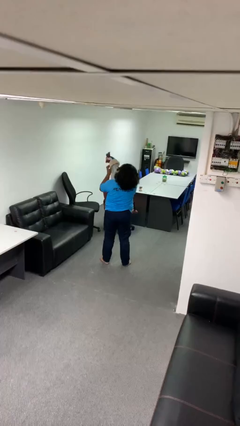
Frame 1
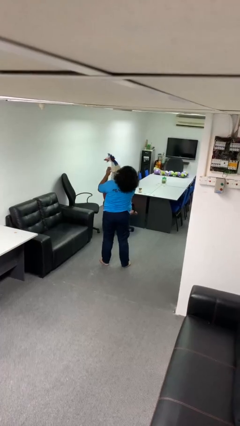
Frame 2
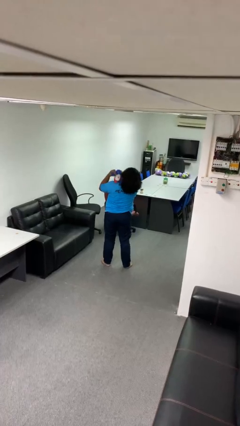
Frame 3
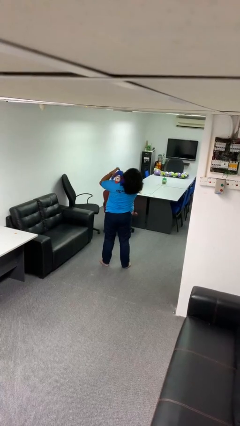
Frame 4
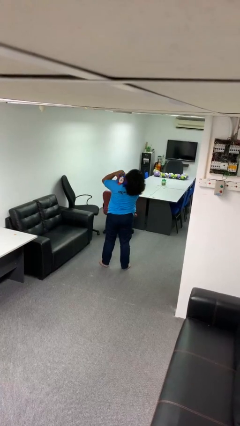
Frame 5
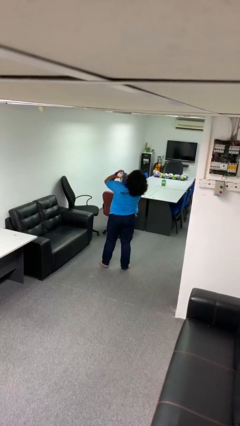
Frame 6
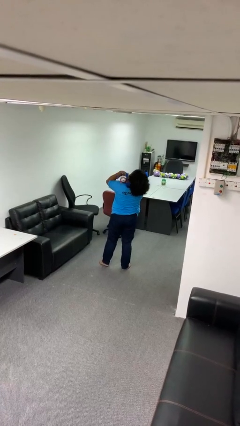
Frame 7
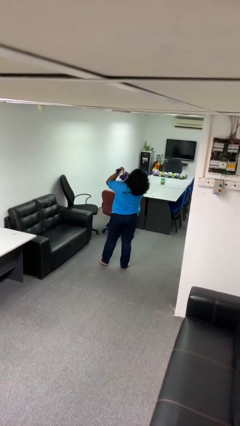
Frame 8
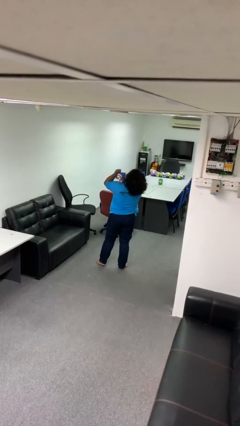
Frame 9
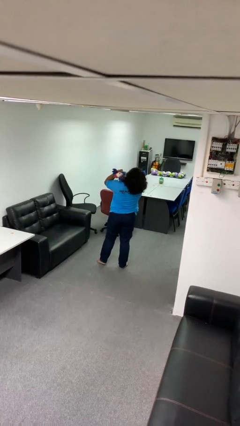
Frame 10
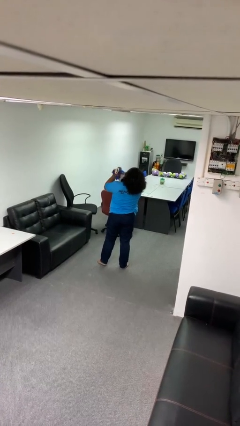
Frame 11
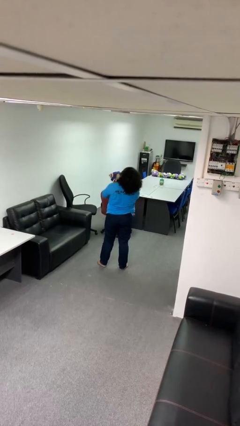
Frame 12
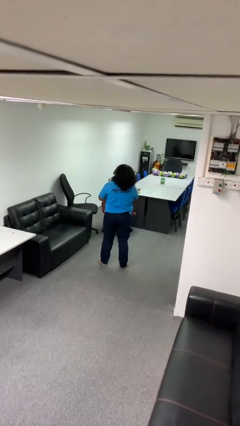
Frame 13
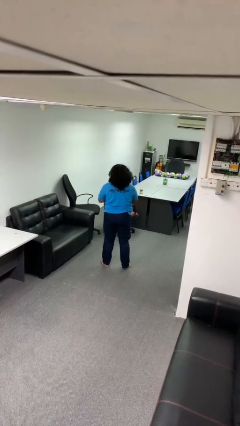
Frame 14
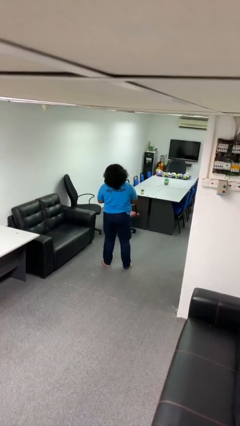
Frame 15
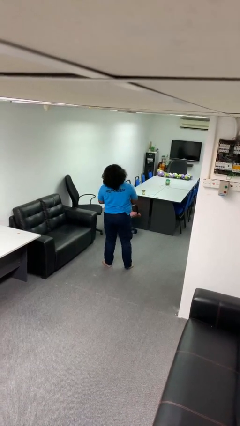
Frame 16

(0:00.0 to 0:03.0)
person hugs stuffed animal

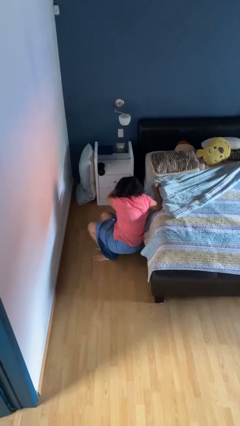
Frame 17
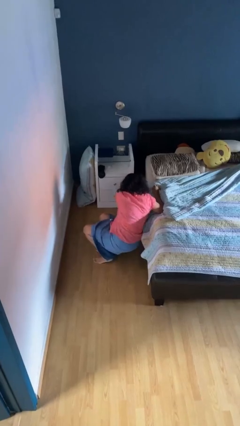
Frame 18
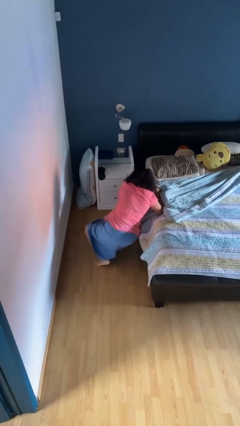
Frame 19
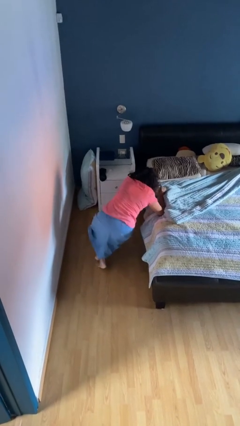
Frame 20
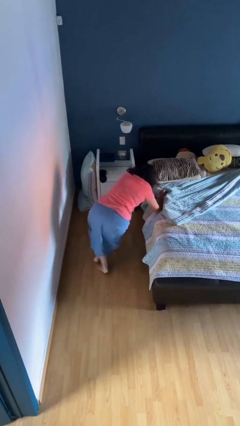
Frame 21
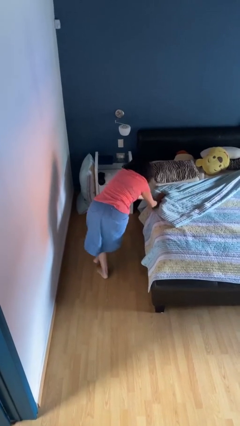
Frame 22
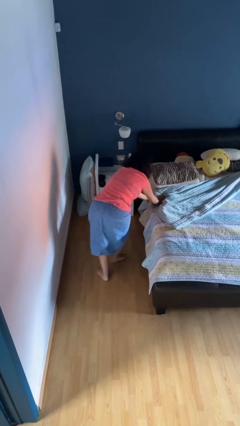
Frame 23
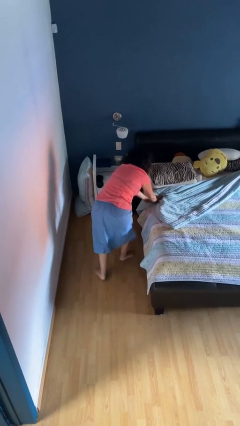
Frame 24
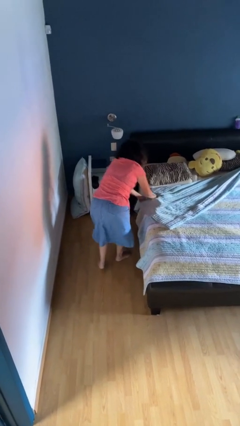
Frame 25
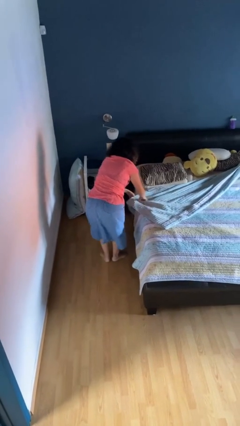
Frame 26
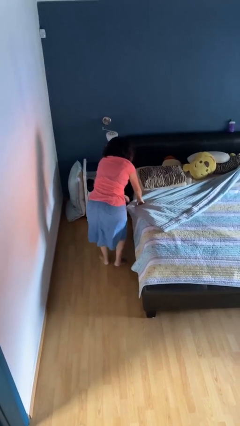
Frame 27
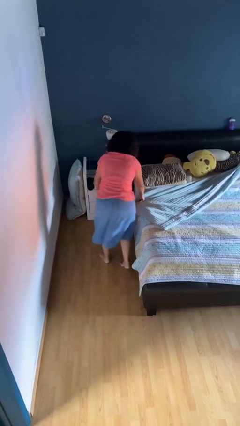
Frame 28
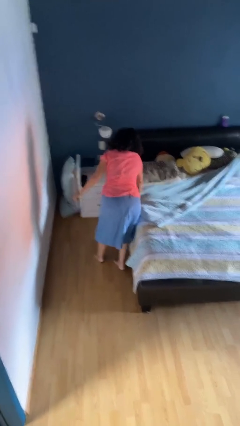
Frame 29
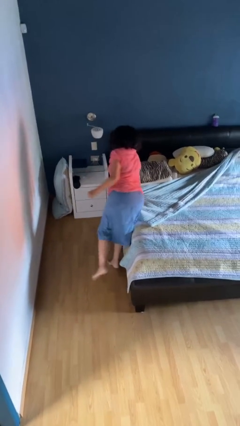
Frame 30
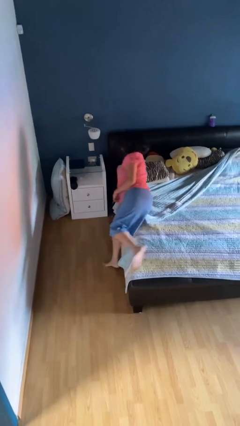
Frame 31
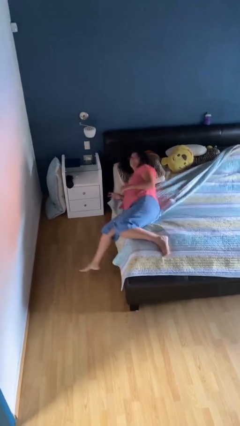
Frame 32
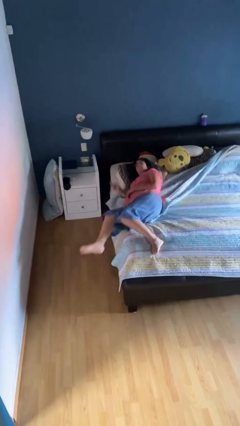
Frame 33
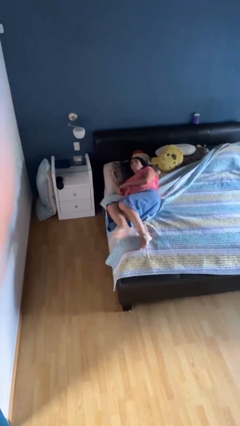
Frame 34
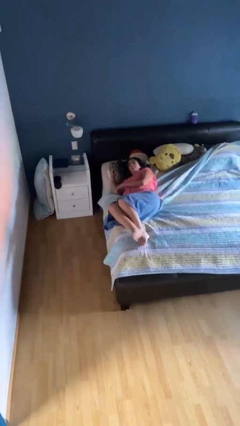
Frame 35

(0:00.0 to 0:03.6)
person stands up from floor

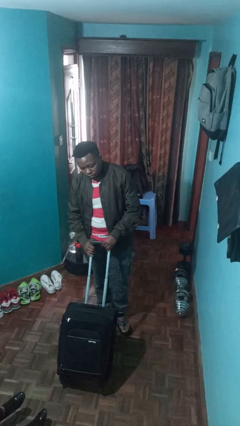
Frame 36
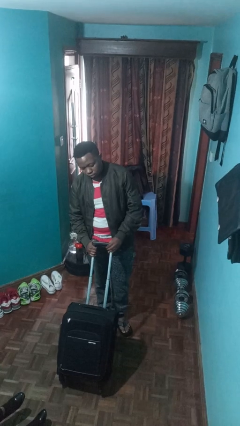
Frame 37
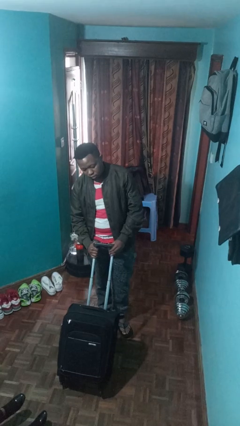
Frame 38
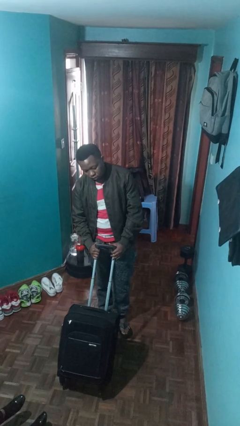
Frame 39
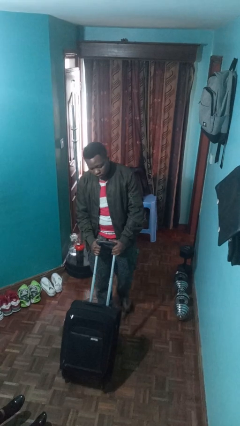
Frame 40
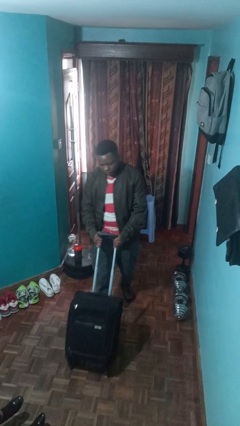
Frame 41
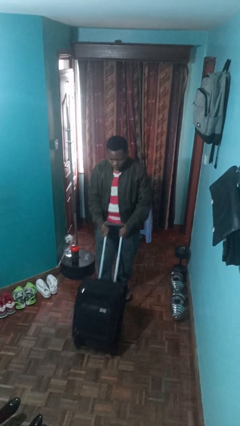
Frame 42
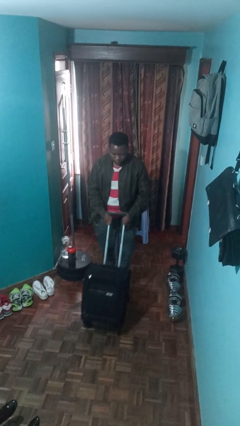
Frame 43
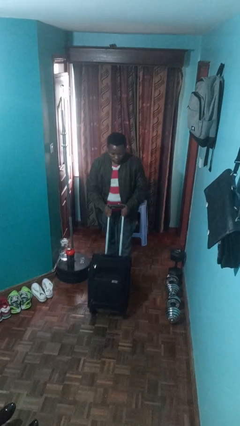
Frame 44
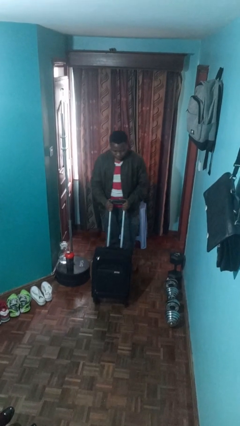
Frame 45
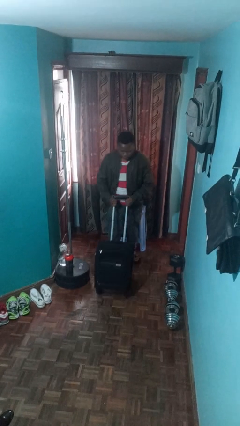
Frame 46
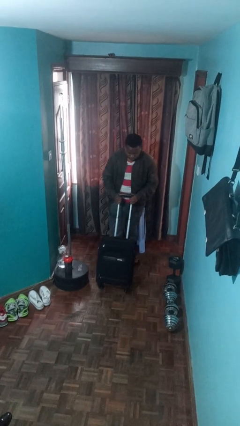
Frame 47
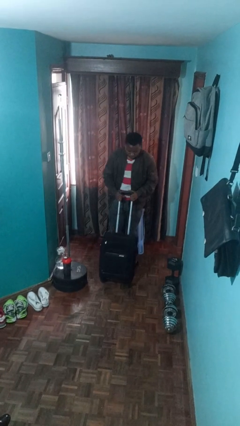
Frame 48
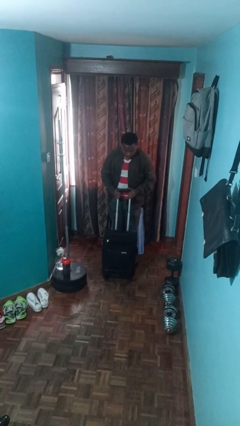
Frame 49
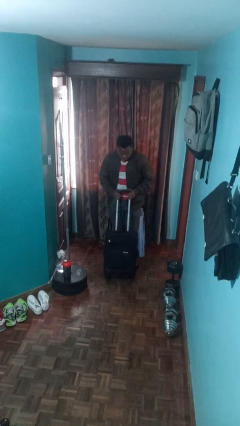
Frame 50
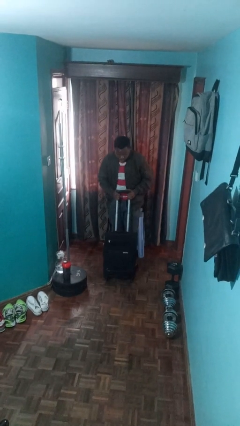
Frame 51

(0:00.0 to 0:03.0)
person pulls wheeled cart

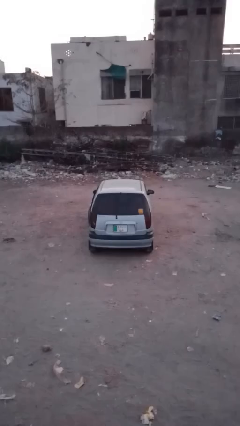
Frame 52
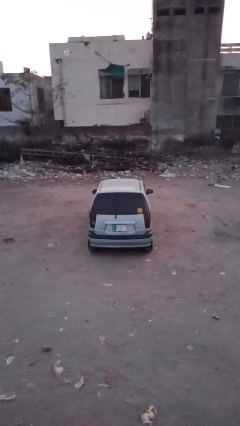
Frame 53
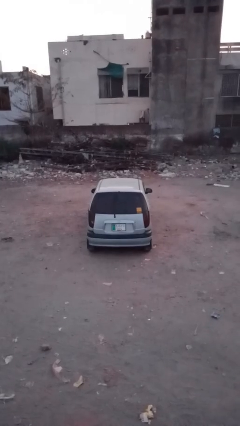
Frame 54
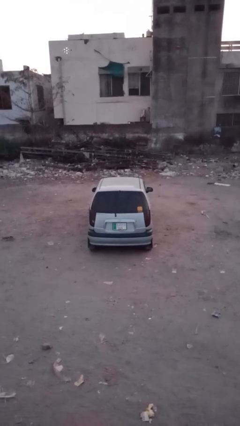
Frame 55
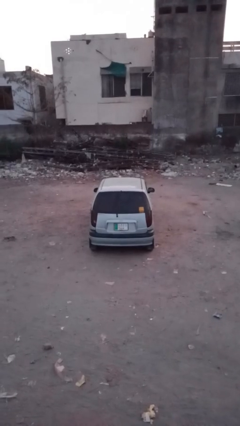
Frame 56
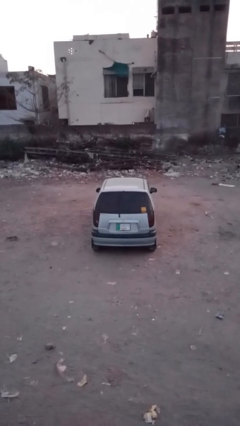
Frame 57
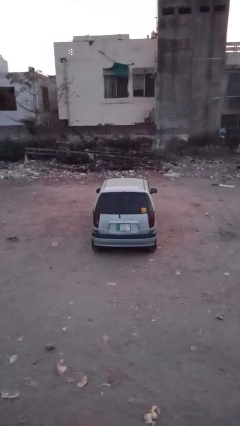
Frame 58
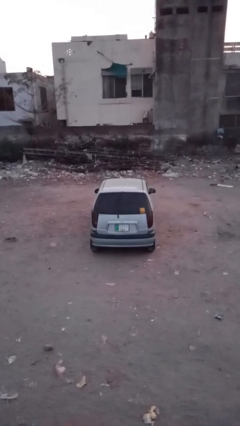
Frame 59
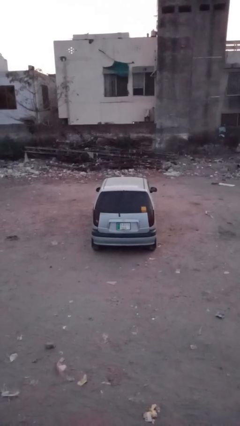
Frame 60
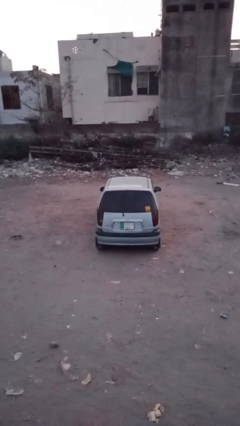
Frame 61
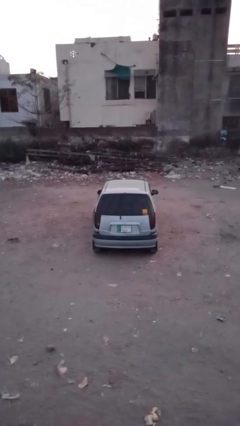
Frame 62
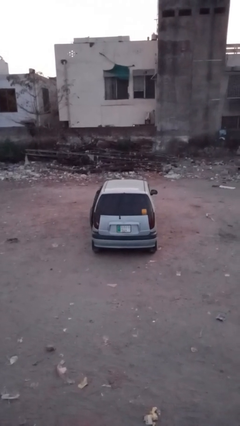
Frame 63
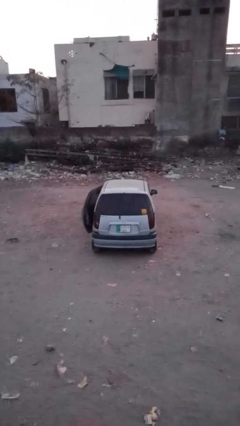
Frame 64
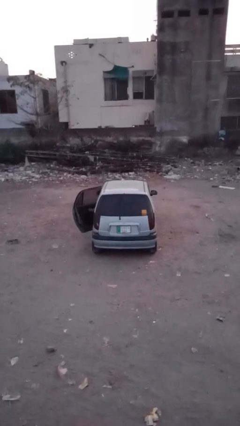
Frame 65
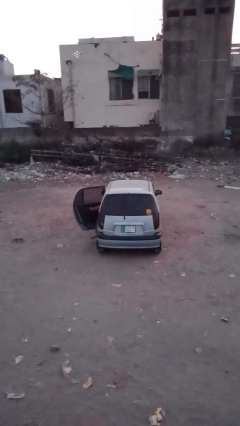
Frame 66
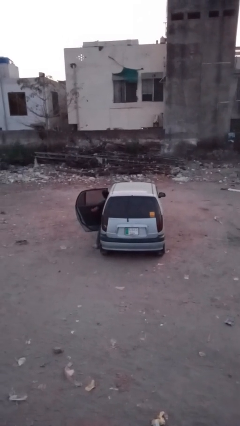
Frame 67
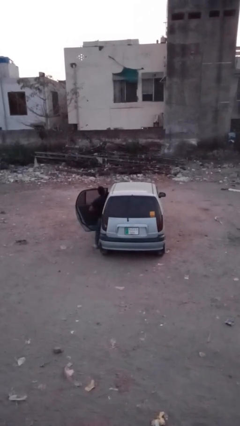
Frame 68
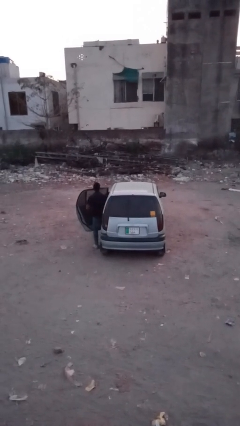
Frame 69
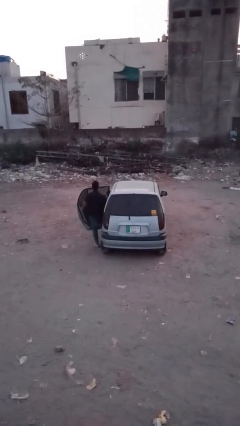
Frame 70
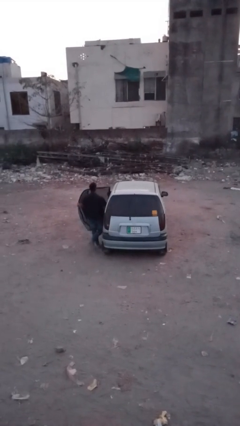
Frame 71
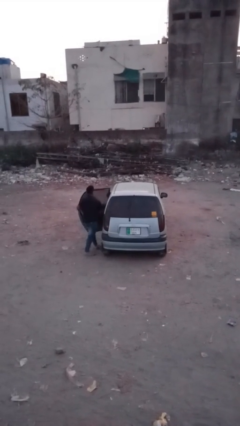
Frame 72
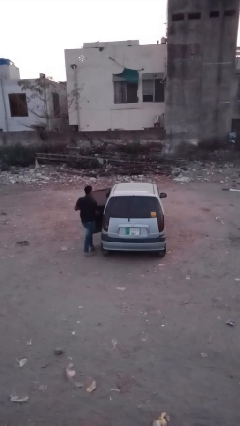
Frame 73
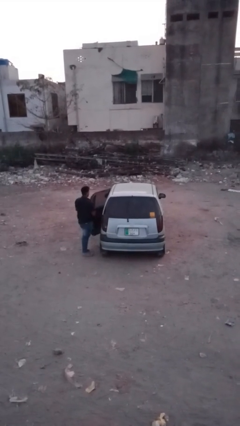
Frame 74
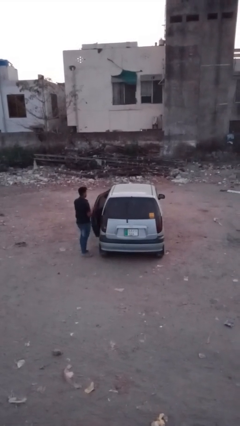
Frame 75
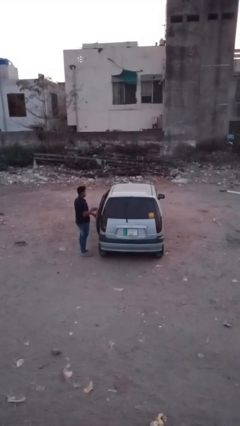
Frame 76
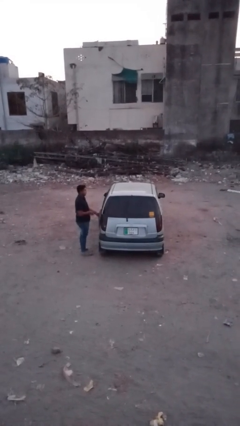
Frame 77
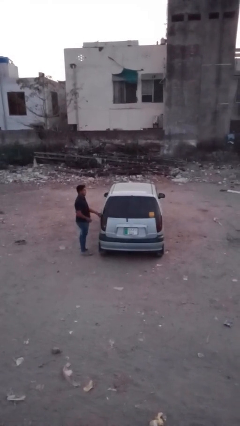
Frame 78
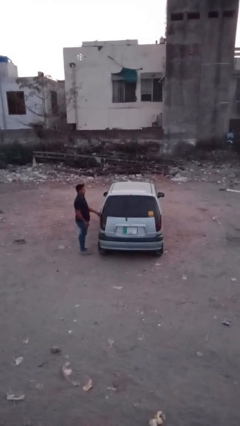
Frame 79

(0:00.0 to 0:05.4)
car drops off person

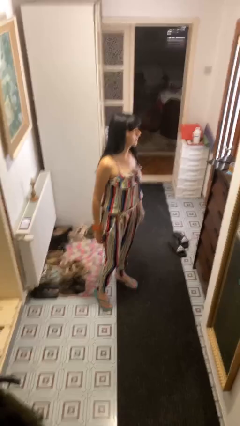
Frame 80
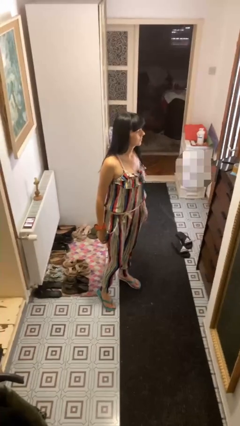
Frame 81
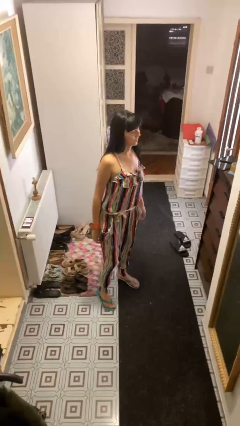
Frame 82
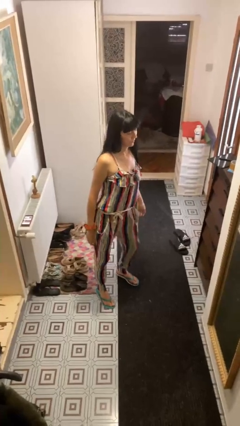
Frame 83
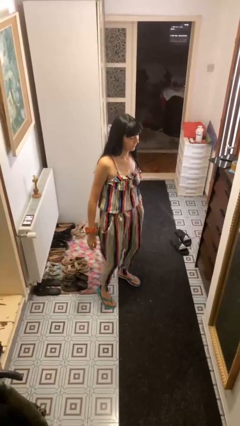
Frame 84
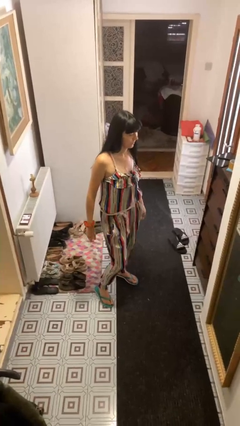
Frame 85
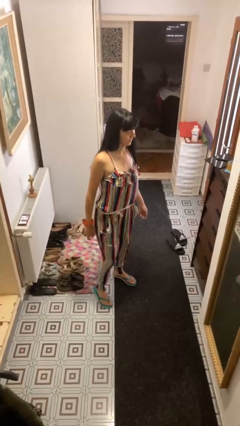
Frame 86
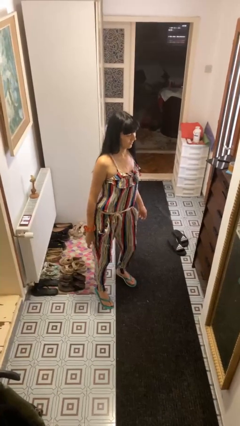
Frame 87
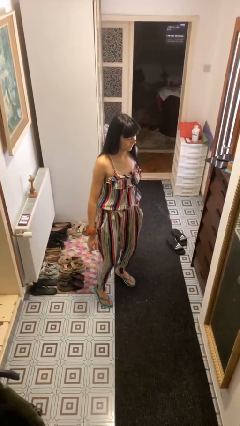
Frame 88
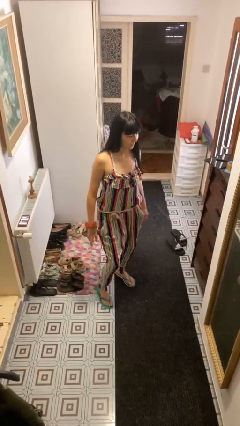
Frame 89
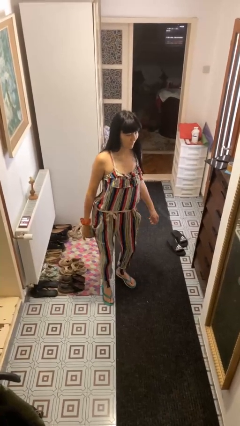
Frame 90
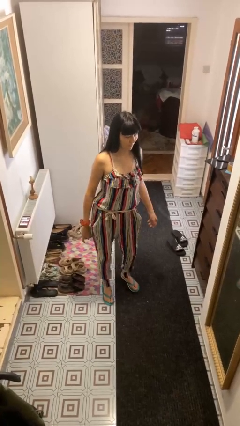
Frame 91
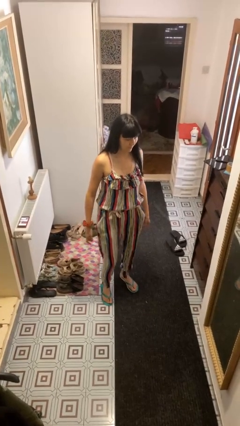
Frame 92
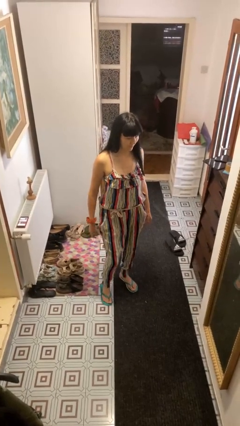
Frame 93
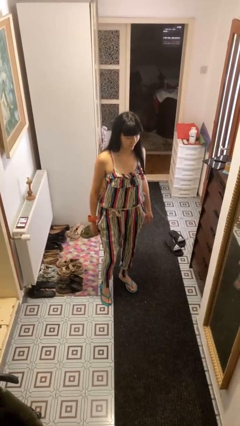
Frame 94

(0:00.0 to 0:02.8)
person wiggles hips
